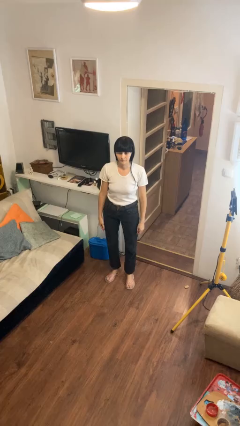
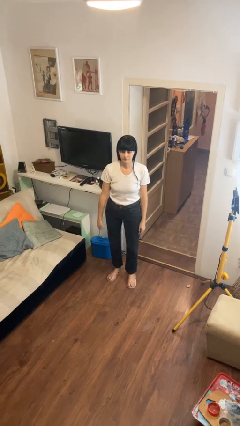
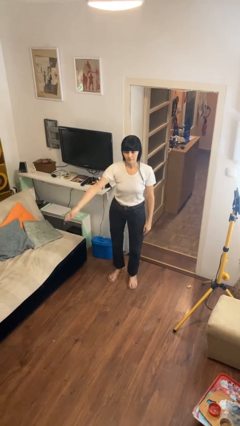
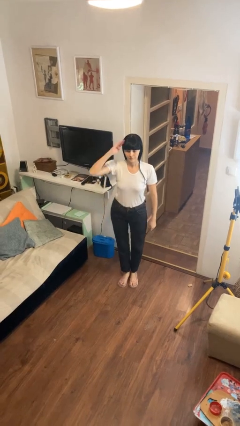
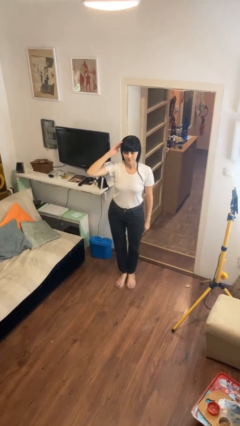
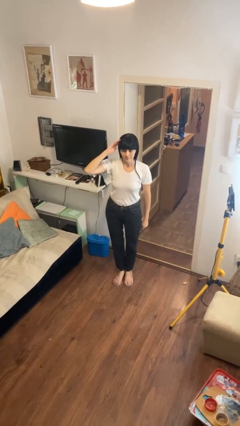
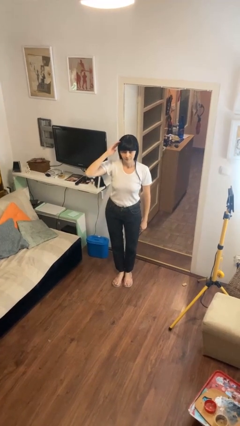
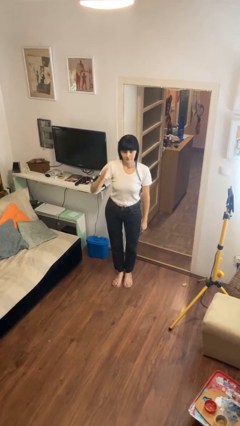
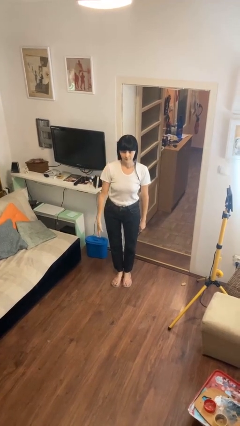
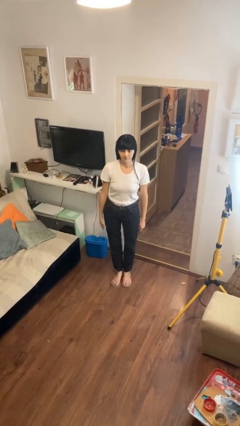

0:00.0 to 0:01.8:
person salutes

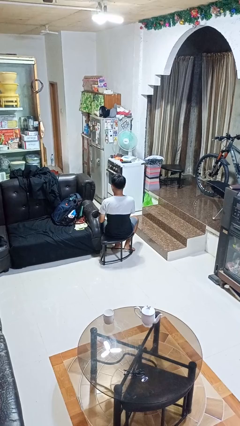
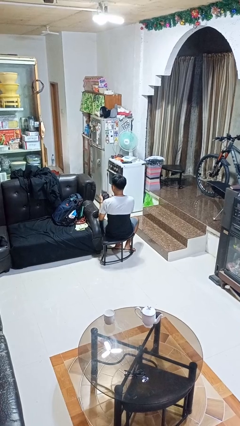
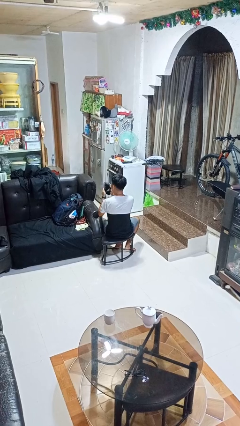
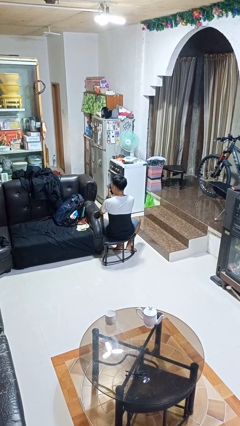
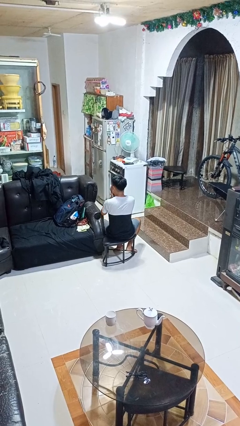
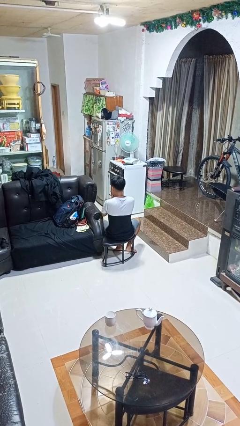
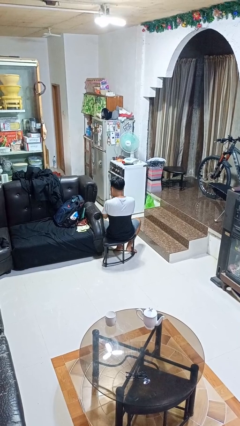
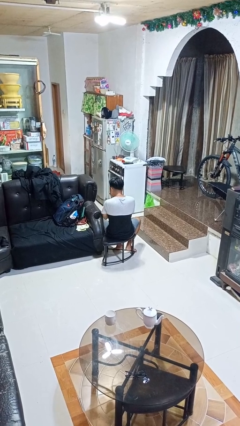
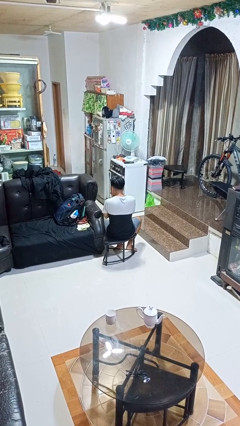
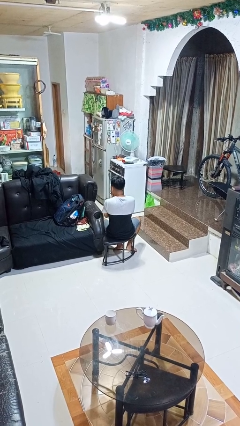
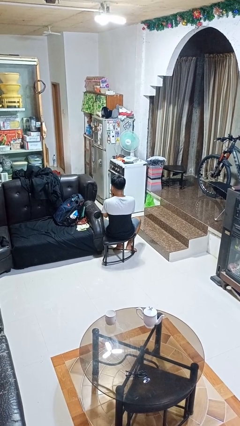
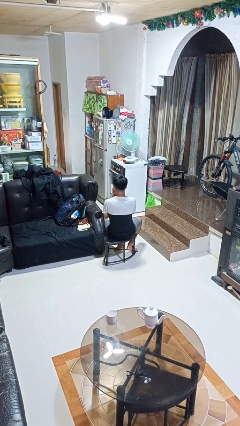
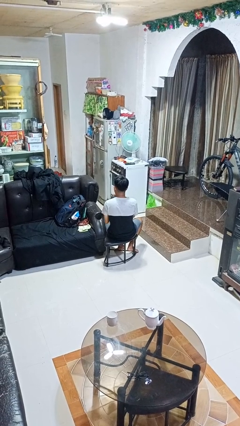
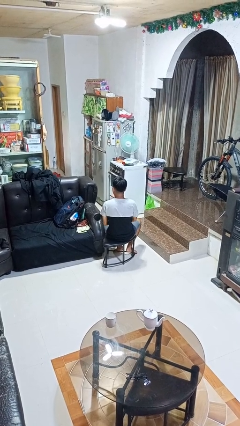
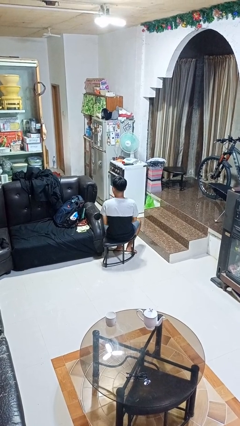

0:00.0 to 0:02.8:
person blows nose

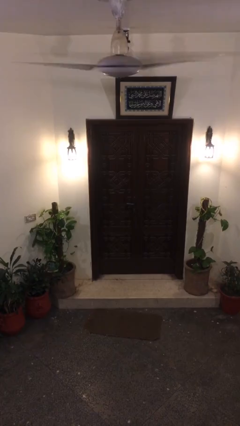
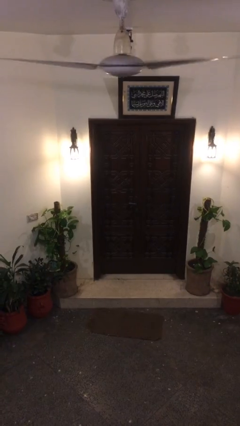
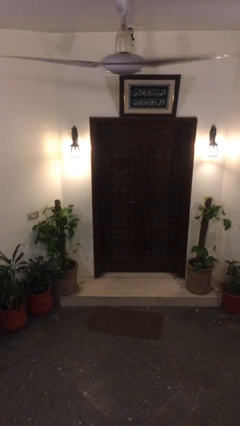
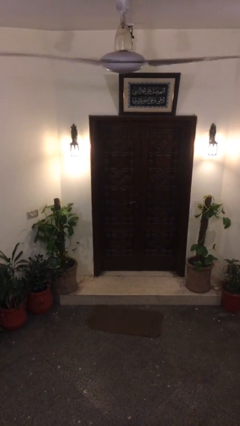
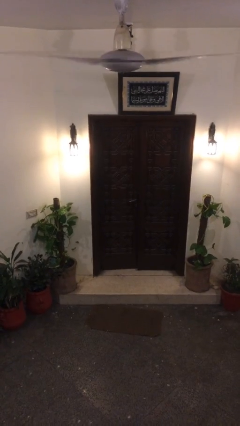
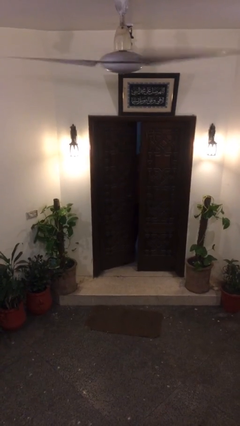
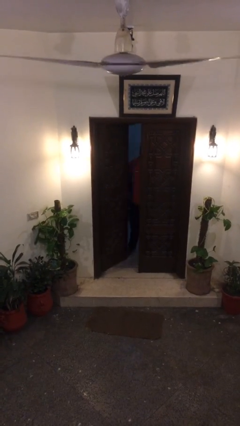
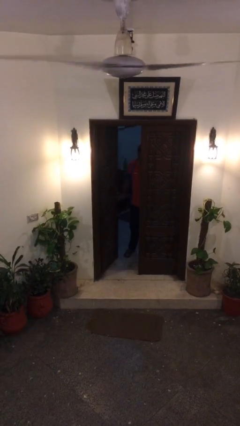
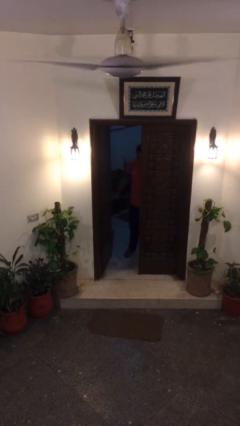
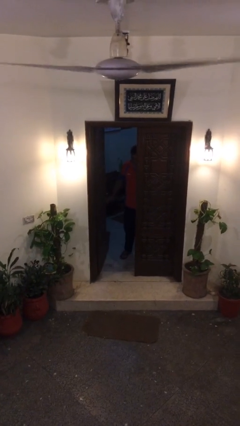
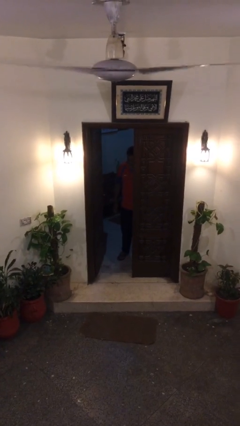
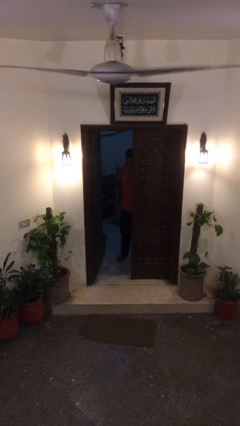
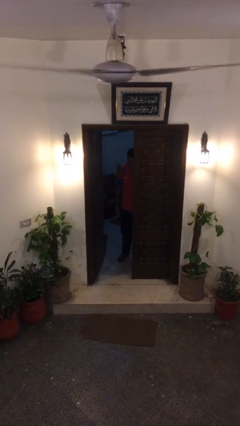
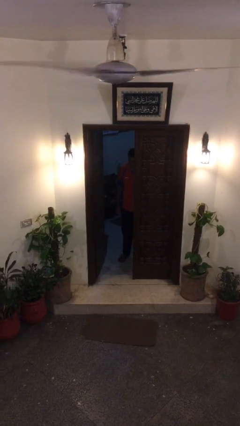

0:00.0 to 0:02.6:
person opens facility door

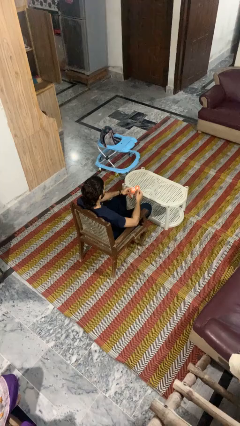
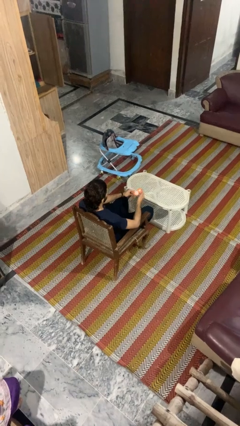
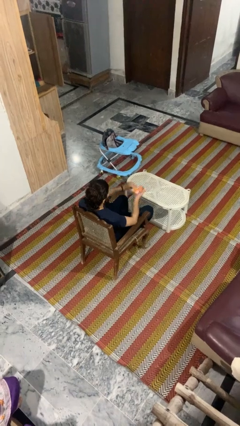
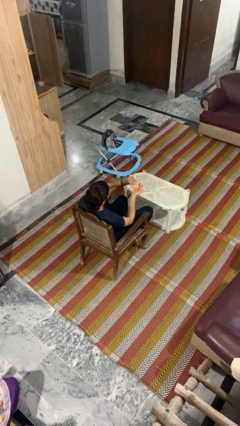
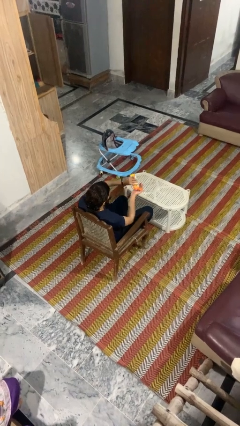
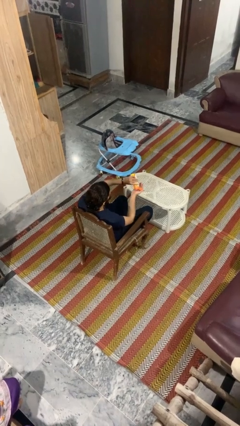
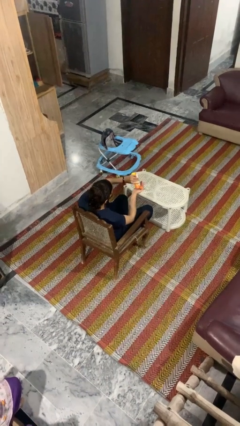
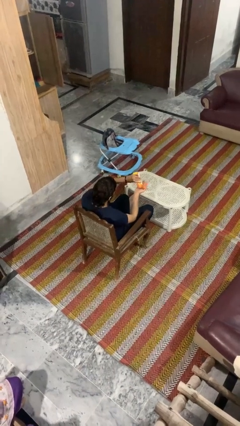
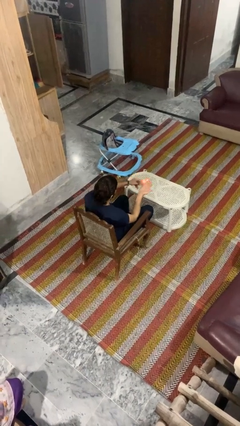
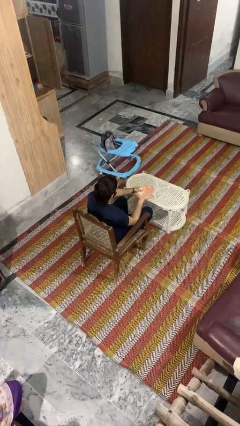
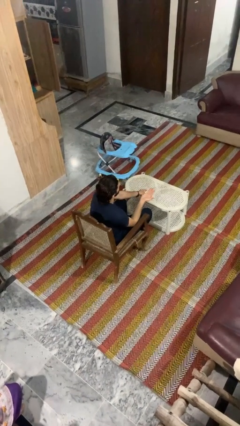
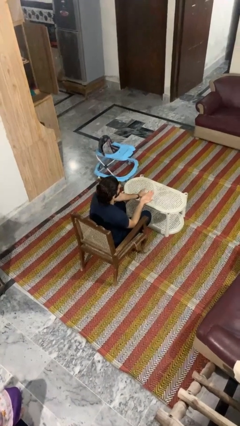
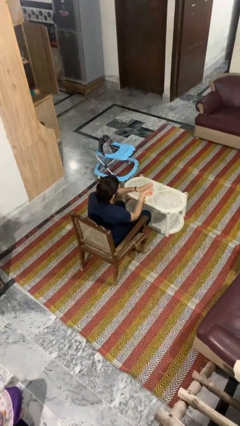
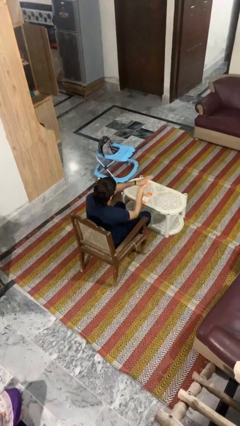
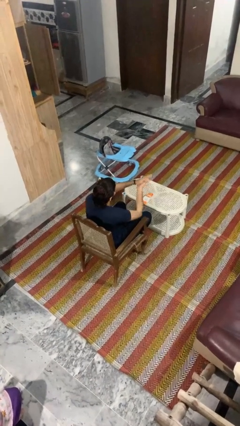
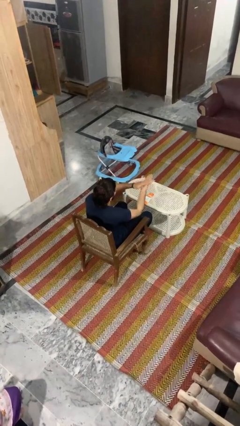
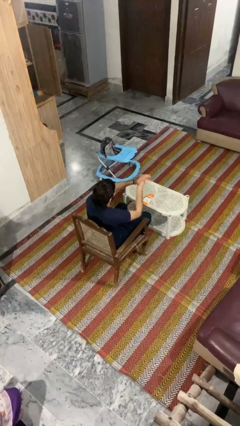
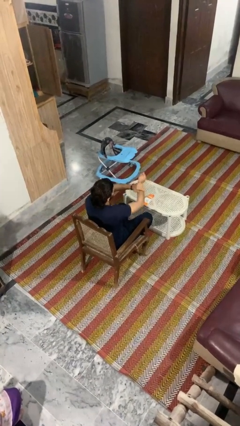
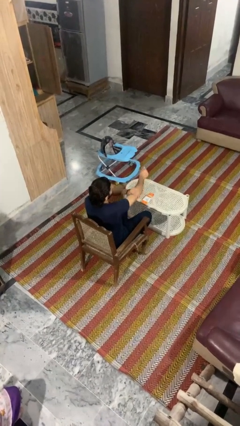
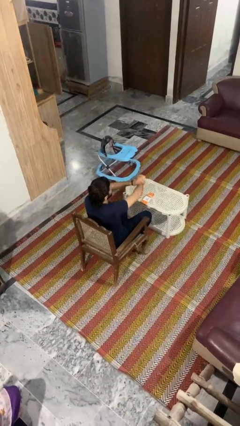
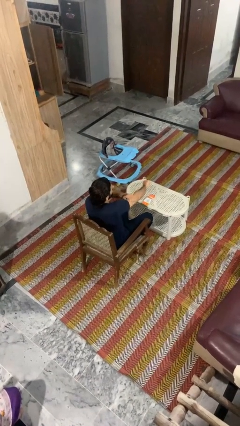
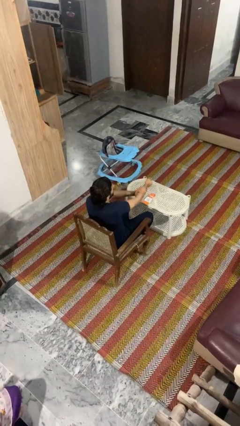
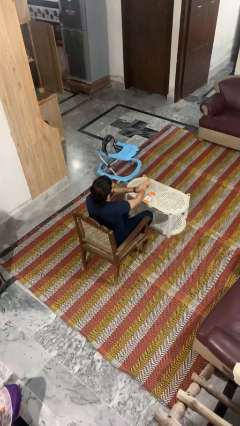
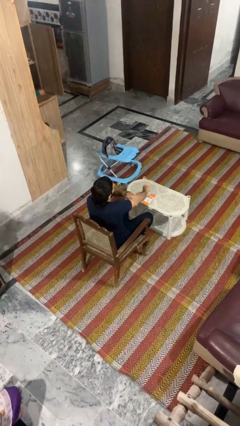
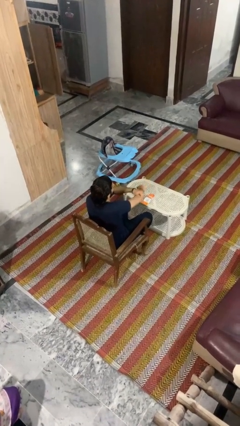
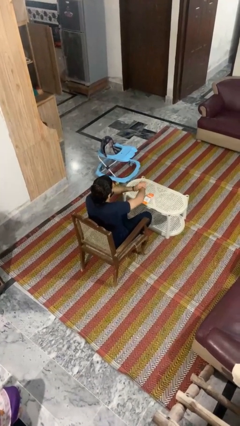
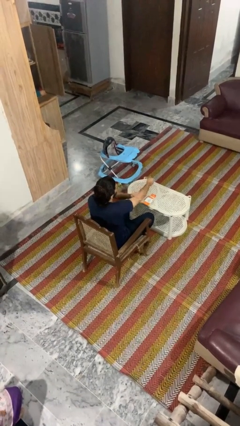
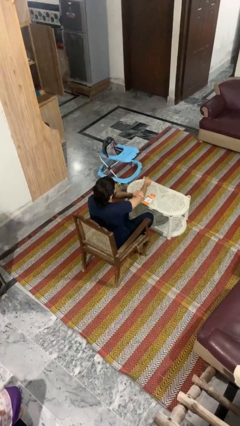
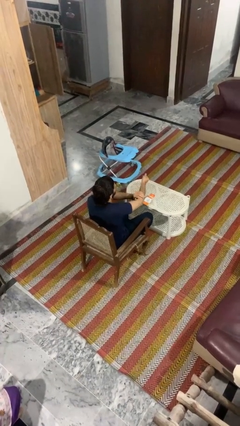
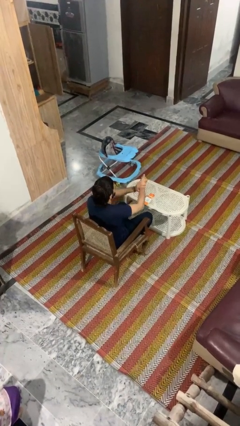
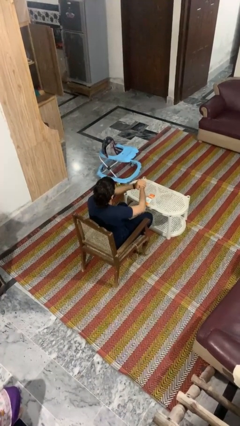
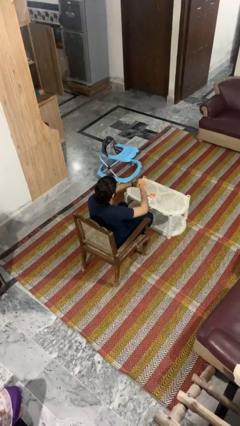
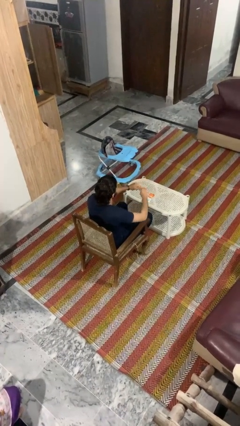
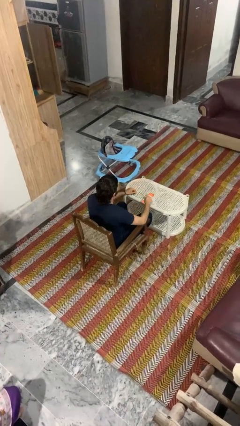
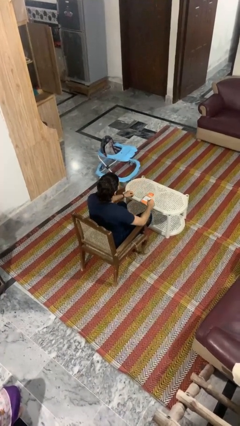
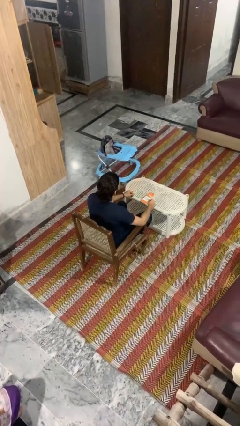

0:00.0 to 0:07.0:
person applies sunscreen

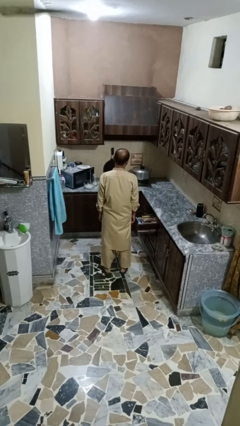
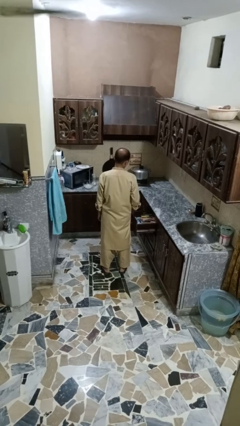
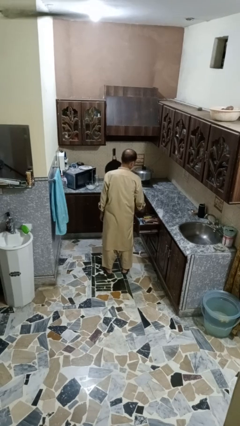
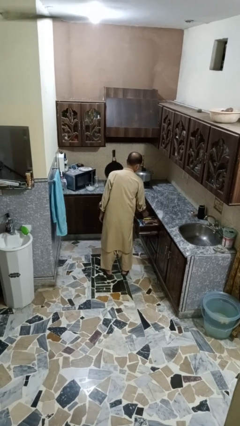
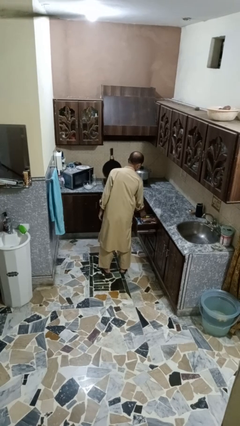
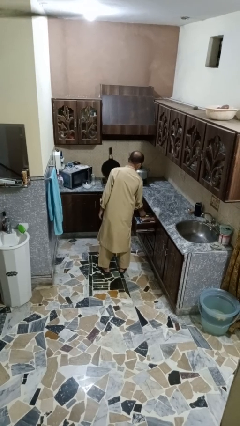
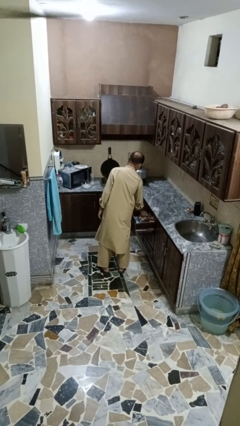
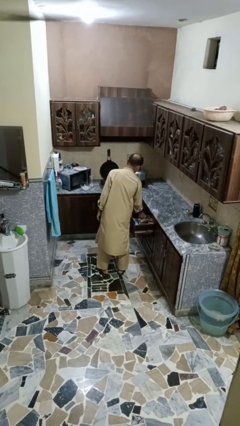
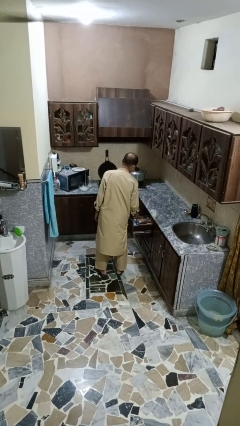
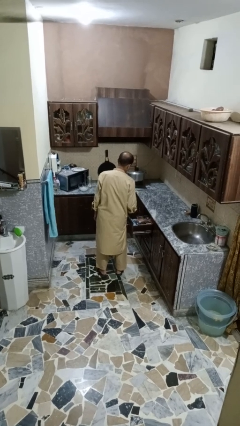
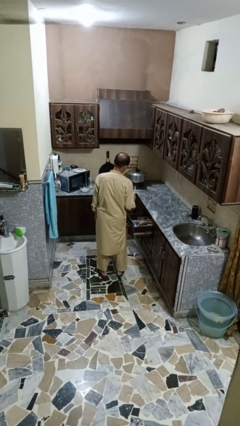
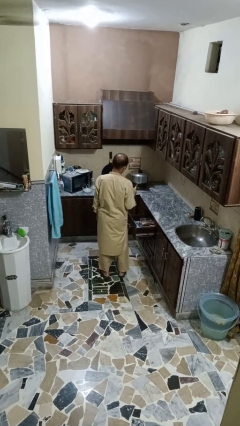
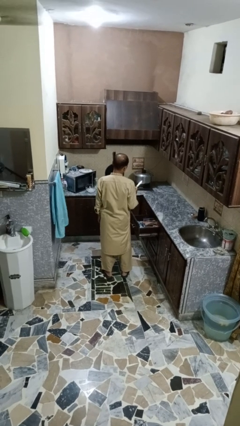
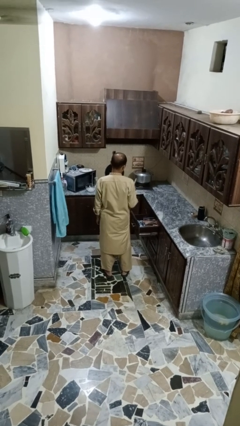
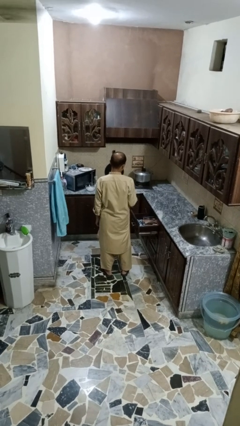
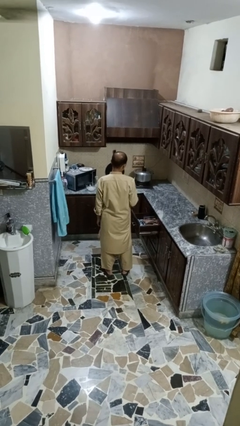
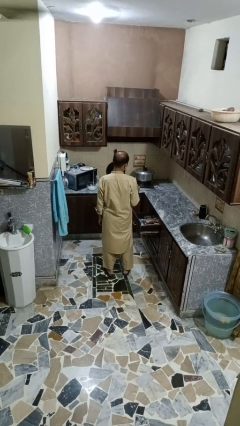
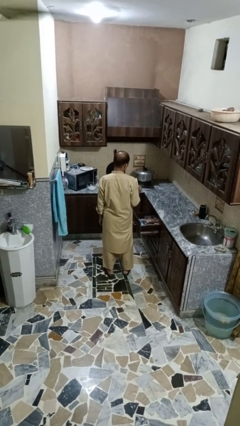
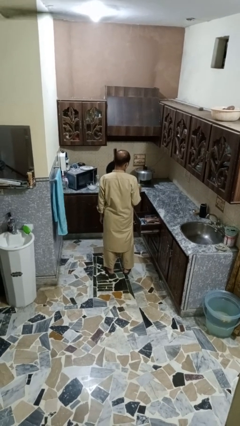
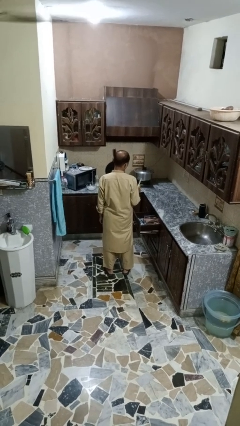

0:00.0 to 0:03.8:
person takes object from kitchen drawer
